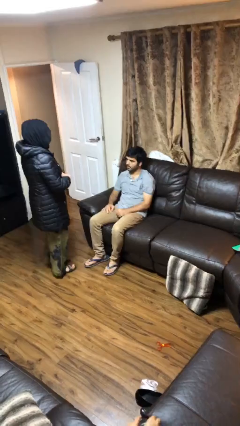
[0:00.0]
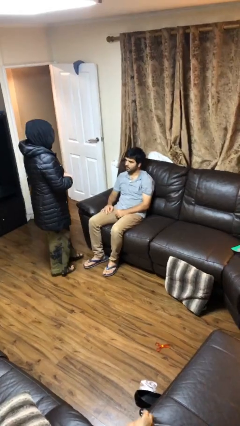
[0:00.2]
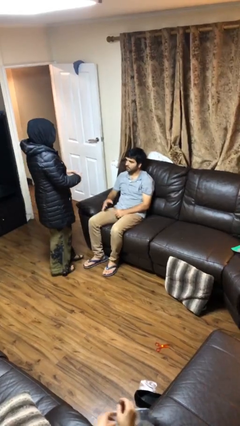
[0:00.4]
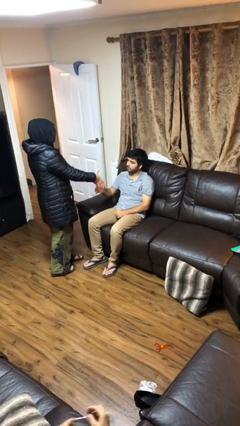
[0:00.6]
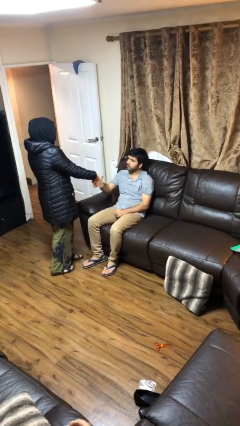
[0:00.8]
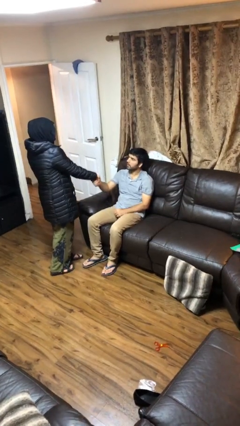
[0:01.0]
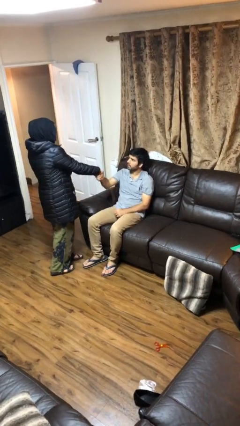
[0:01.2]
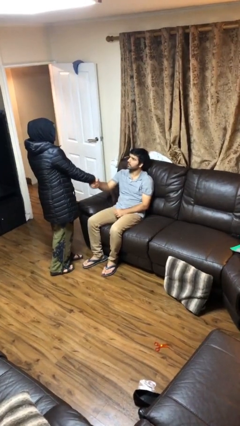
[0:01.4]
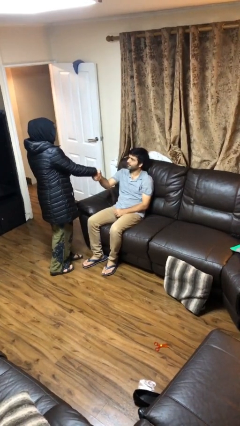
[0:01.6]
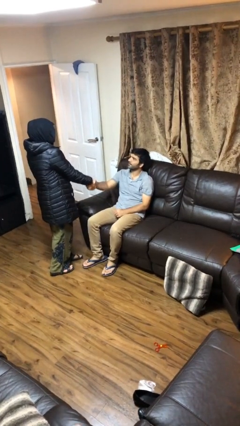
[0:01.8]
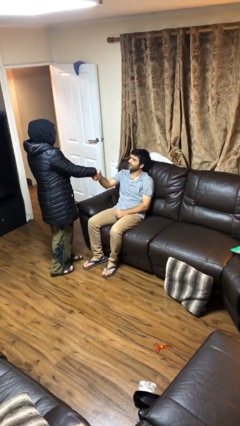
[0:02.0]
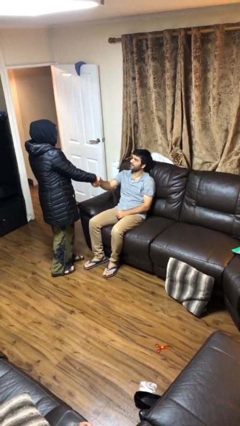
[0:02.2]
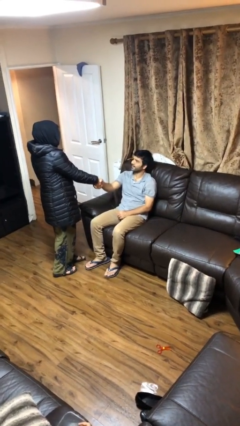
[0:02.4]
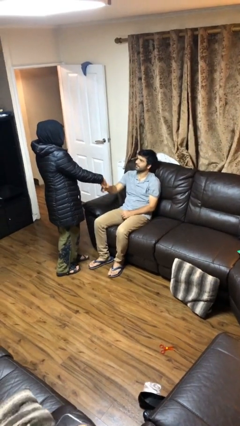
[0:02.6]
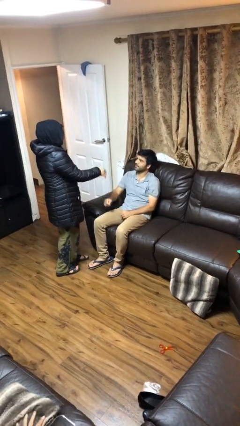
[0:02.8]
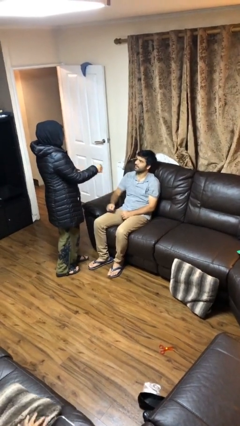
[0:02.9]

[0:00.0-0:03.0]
person shakes hand

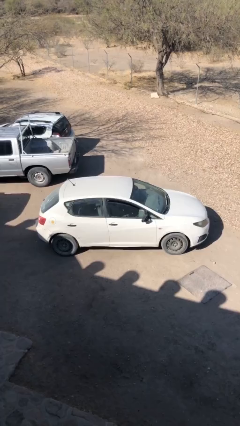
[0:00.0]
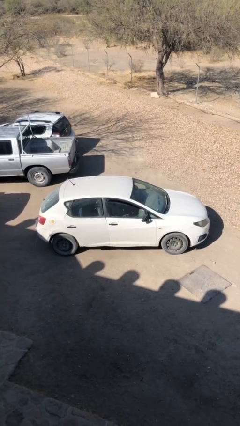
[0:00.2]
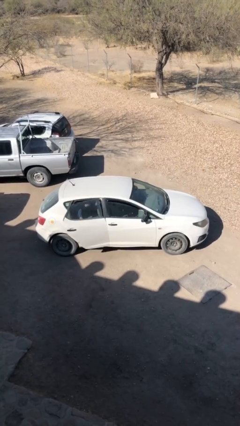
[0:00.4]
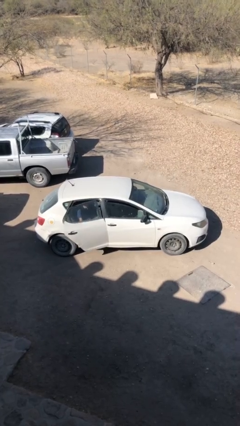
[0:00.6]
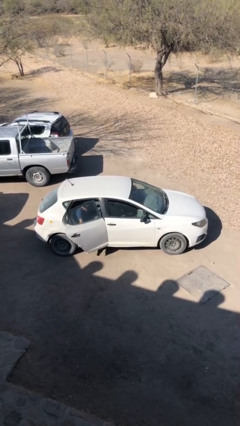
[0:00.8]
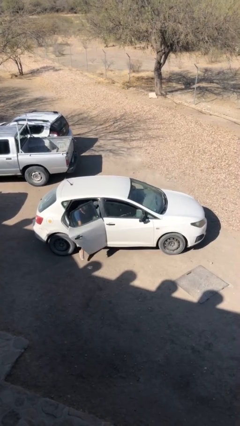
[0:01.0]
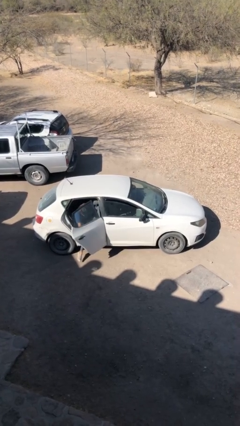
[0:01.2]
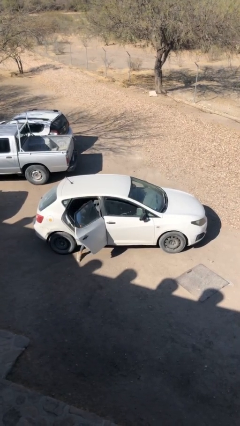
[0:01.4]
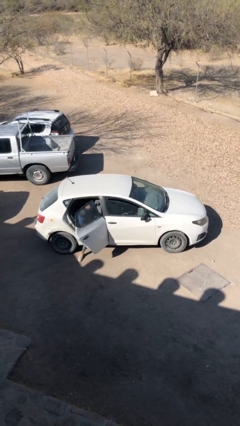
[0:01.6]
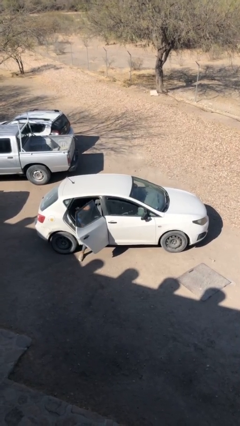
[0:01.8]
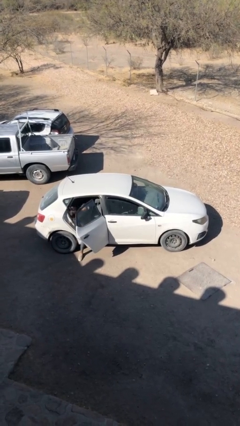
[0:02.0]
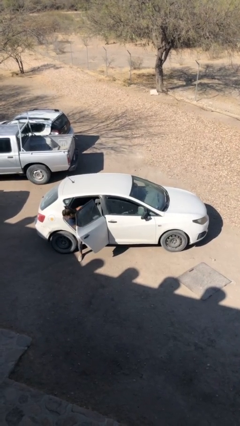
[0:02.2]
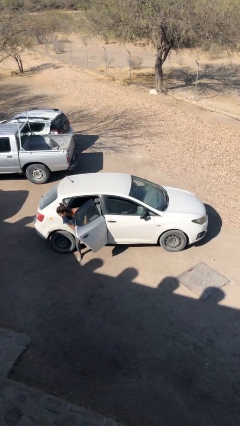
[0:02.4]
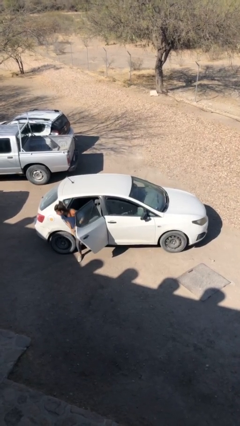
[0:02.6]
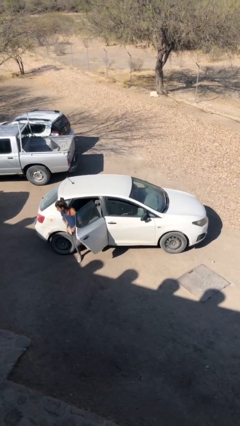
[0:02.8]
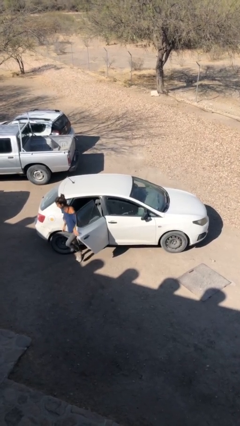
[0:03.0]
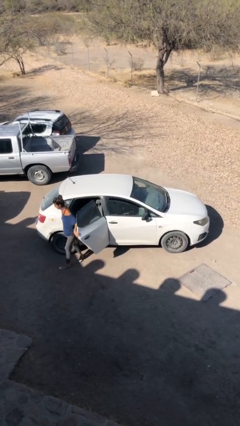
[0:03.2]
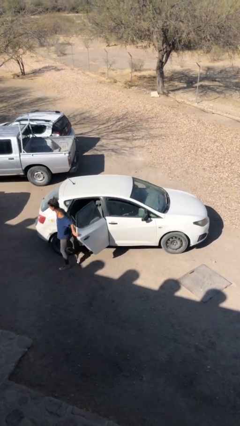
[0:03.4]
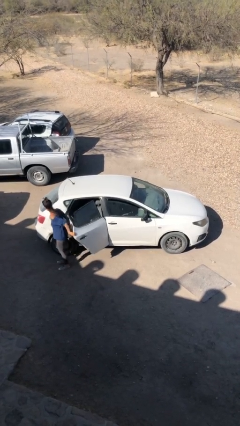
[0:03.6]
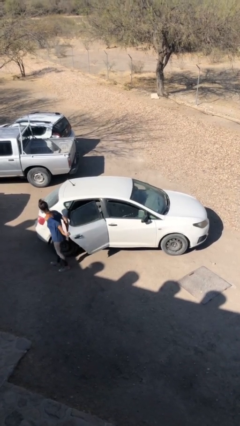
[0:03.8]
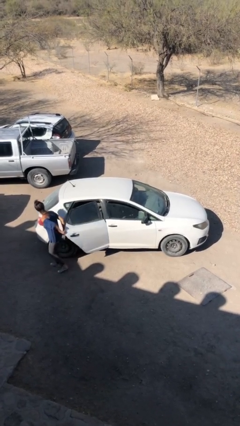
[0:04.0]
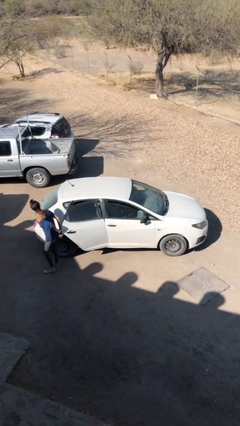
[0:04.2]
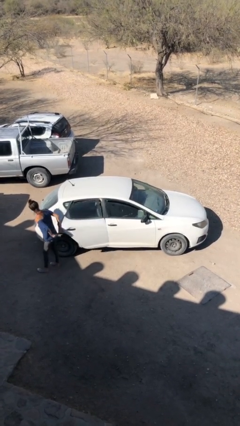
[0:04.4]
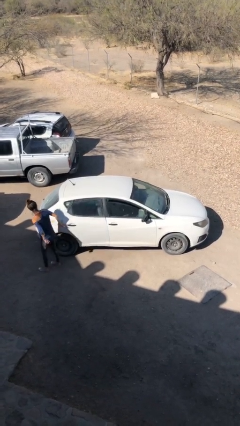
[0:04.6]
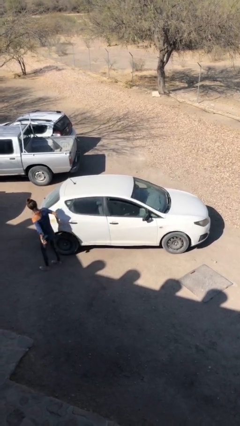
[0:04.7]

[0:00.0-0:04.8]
car drops off person

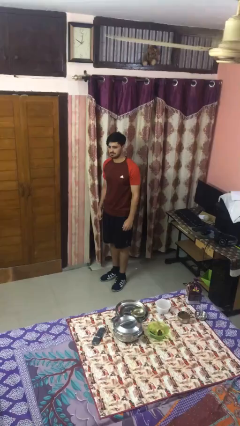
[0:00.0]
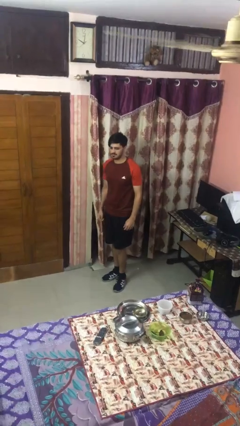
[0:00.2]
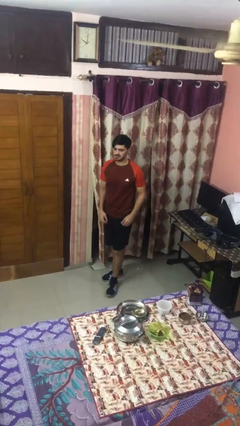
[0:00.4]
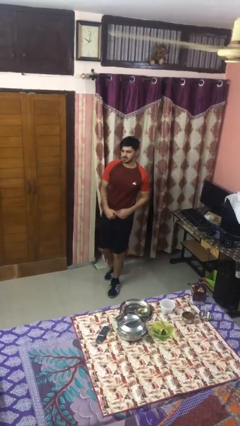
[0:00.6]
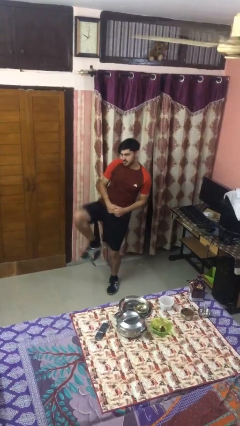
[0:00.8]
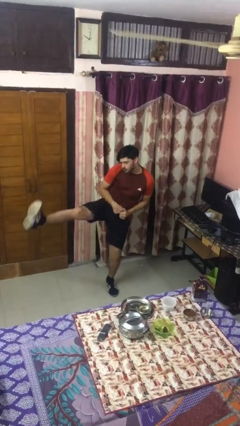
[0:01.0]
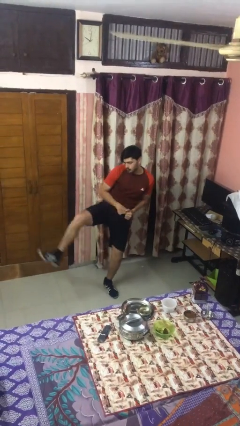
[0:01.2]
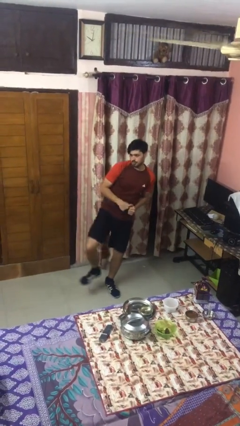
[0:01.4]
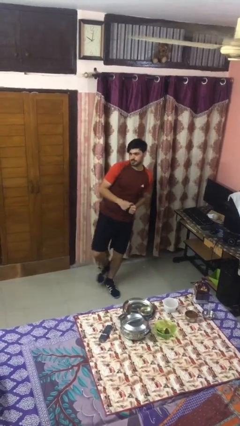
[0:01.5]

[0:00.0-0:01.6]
person karate kicks

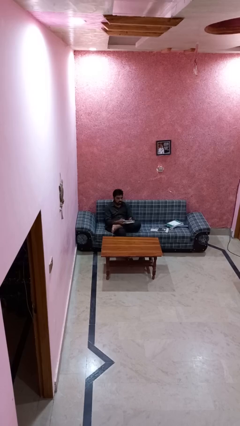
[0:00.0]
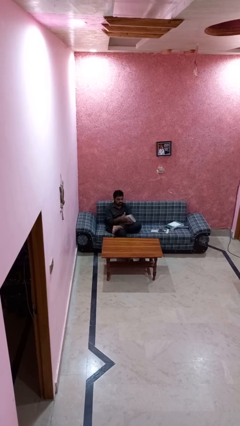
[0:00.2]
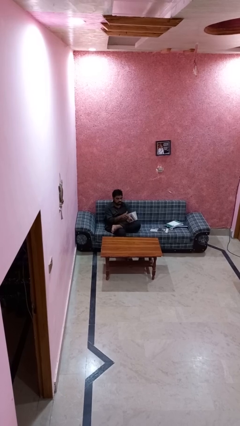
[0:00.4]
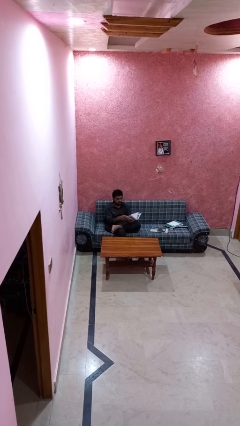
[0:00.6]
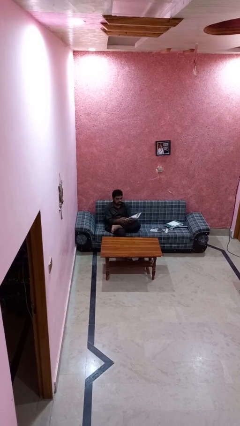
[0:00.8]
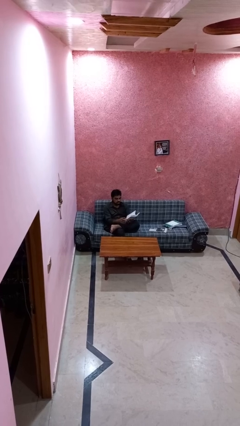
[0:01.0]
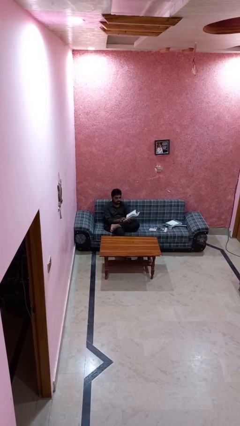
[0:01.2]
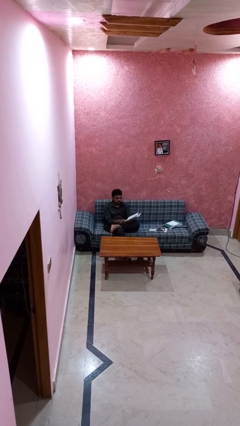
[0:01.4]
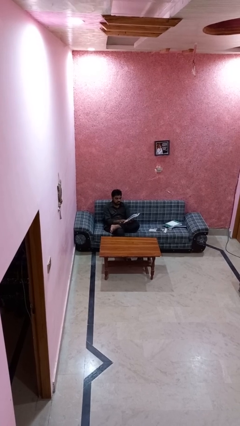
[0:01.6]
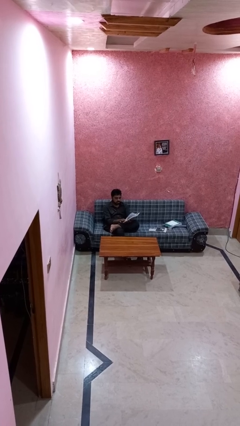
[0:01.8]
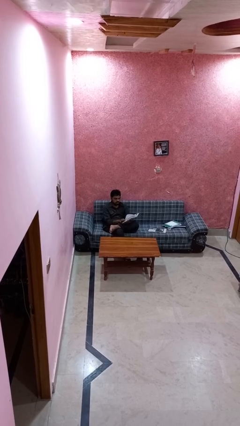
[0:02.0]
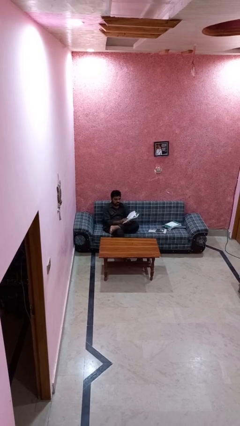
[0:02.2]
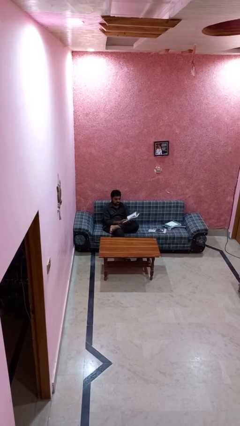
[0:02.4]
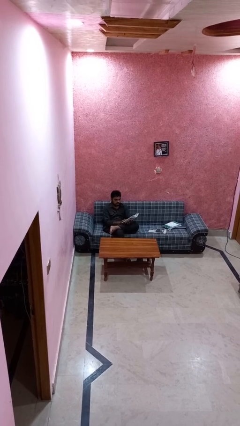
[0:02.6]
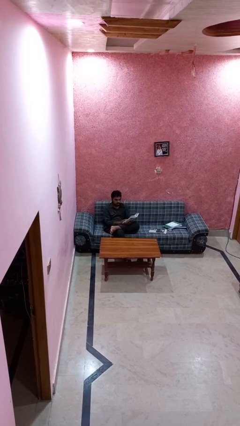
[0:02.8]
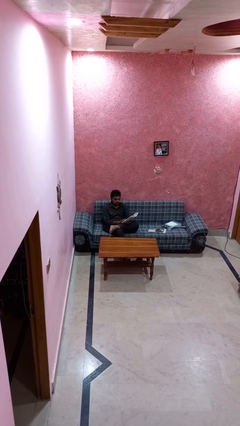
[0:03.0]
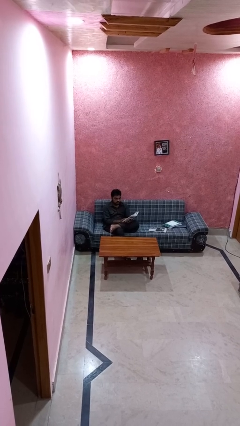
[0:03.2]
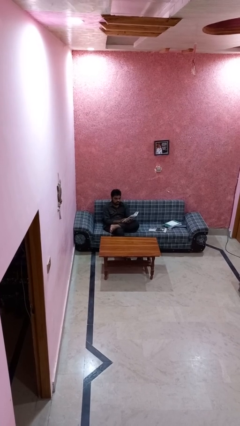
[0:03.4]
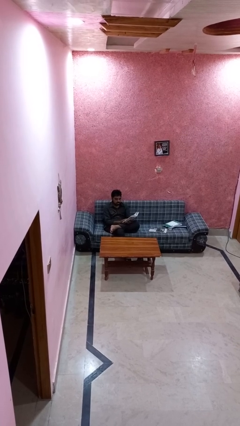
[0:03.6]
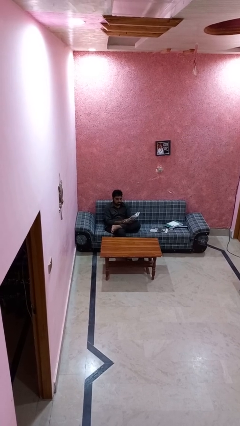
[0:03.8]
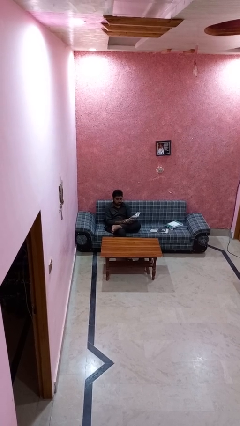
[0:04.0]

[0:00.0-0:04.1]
person reads book

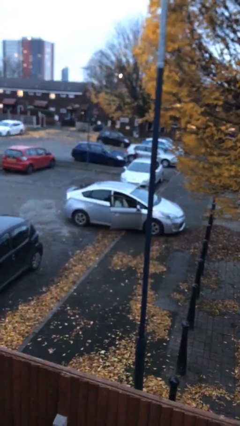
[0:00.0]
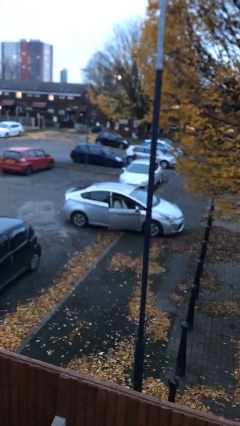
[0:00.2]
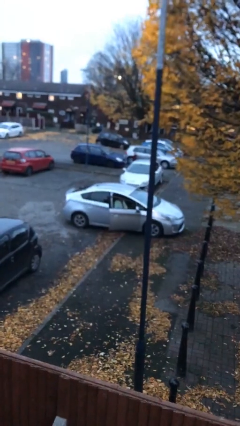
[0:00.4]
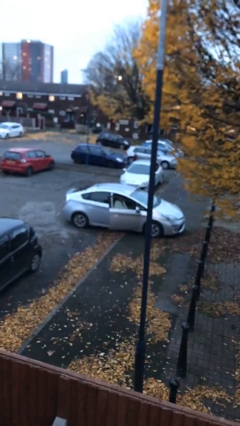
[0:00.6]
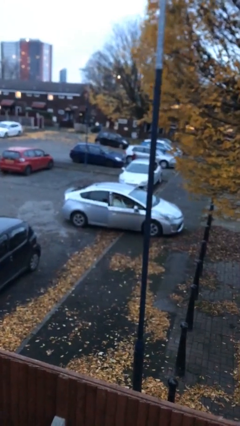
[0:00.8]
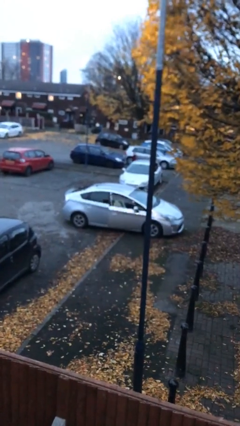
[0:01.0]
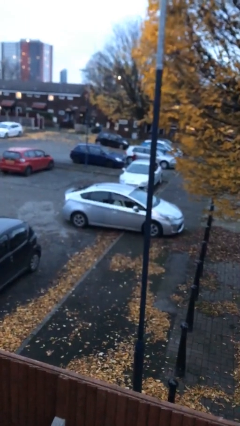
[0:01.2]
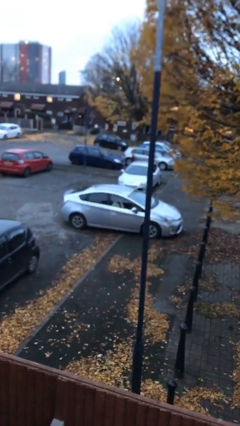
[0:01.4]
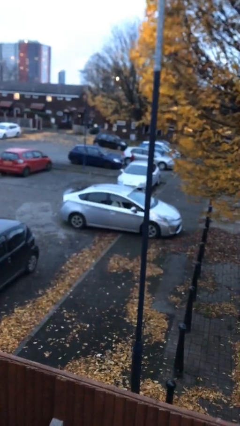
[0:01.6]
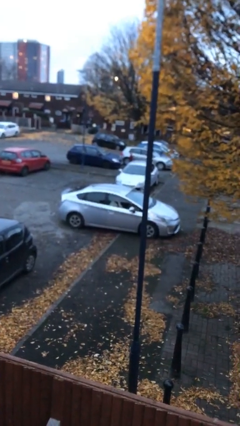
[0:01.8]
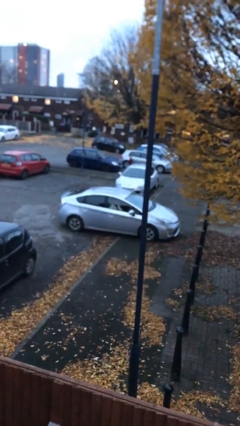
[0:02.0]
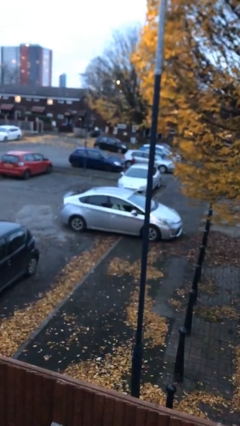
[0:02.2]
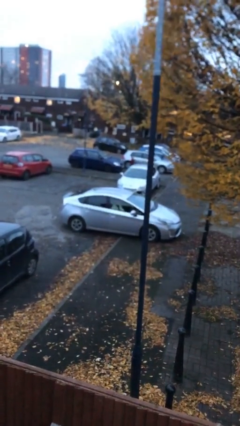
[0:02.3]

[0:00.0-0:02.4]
person closes car door

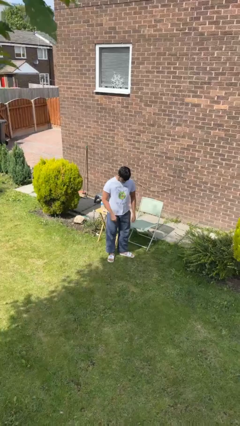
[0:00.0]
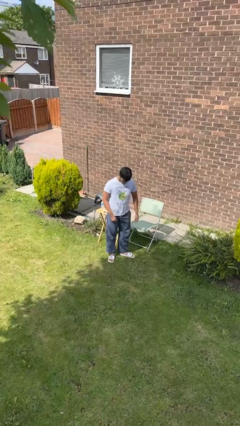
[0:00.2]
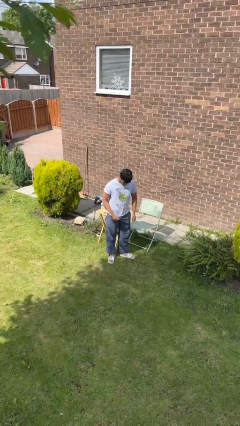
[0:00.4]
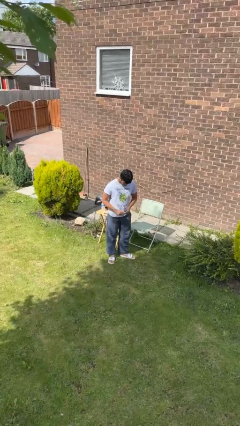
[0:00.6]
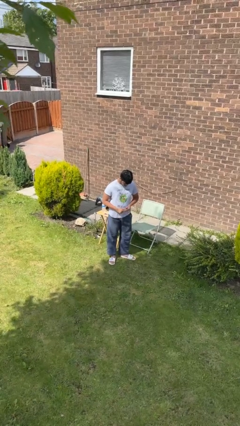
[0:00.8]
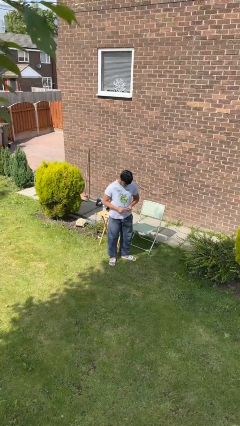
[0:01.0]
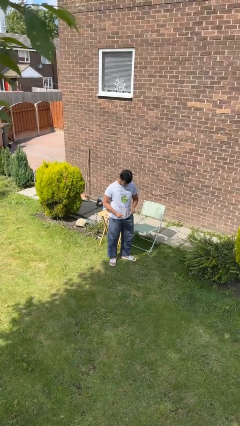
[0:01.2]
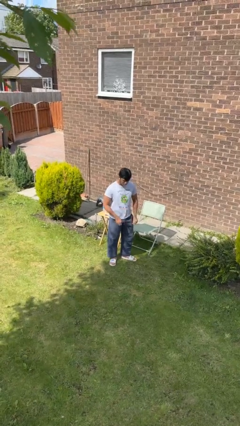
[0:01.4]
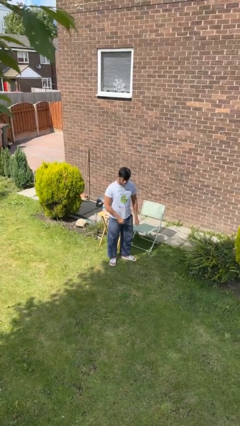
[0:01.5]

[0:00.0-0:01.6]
person takes off ring
